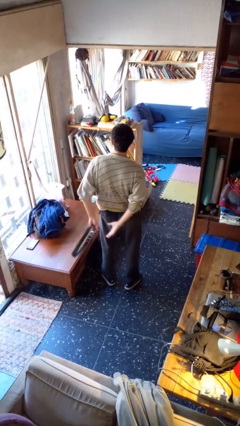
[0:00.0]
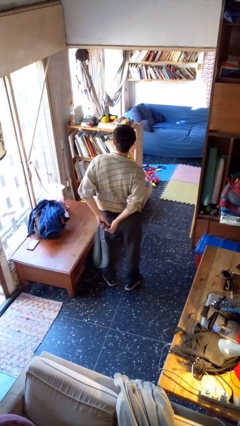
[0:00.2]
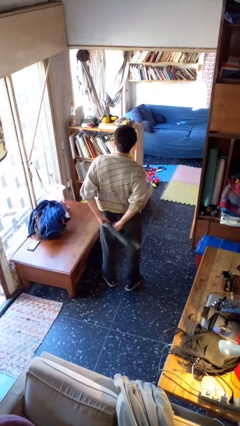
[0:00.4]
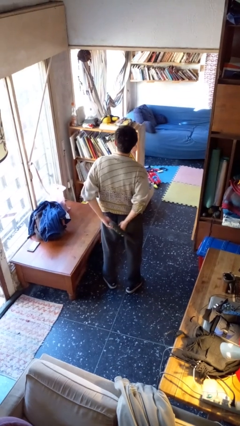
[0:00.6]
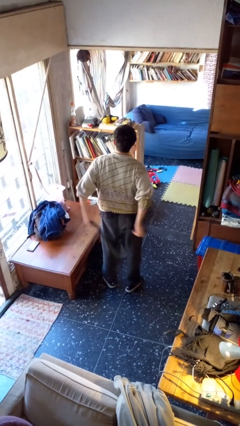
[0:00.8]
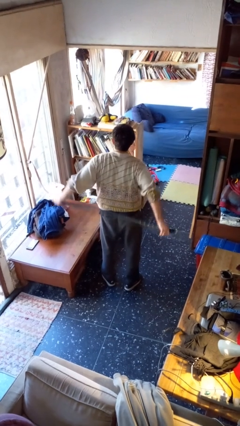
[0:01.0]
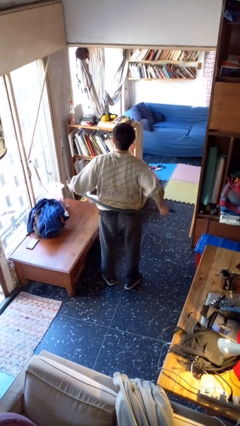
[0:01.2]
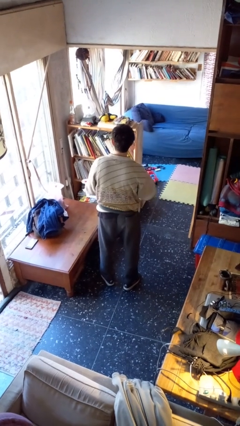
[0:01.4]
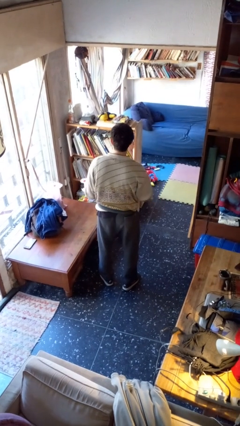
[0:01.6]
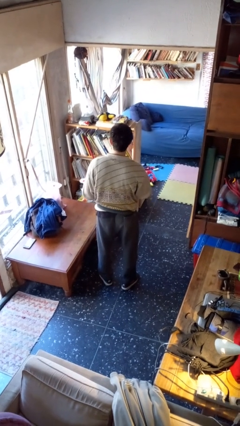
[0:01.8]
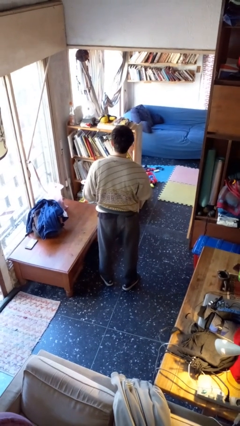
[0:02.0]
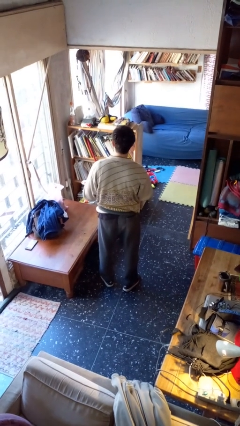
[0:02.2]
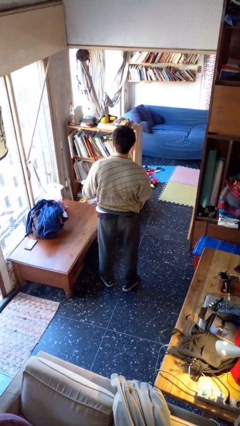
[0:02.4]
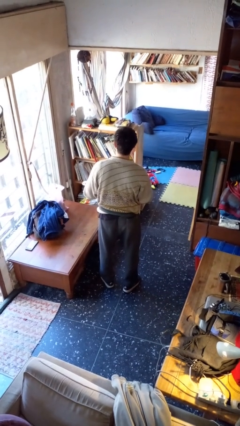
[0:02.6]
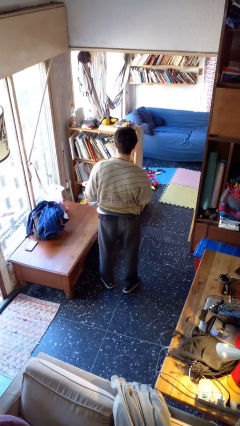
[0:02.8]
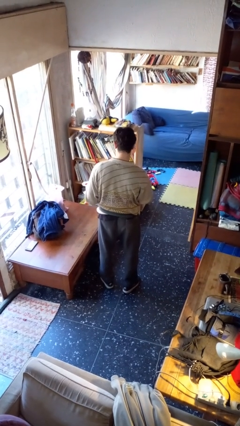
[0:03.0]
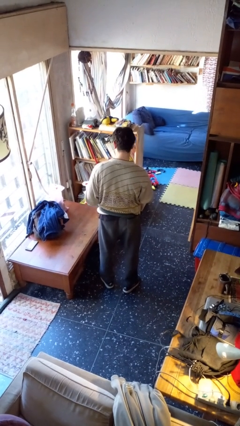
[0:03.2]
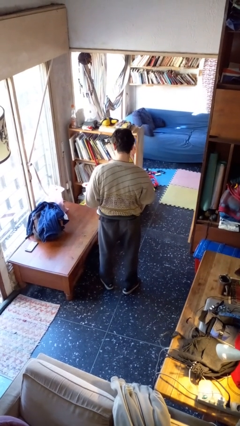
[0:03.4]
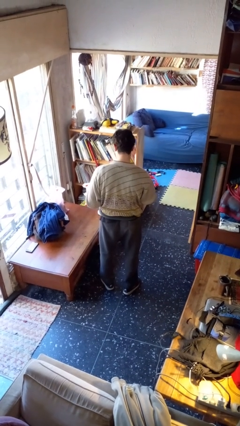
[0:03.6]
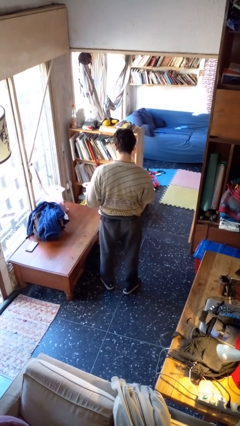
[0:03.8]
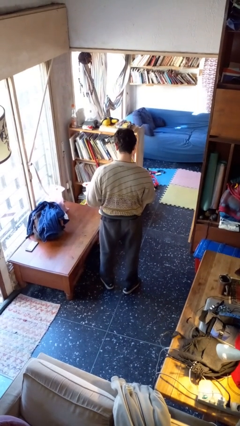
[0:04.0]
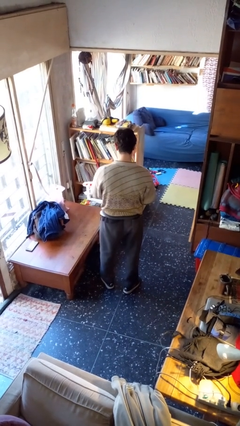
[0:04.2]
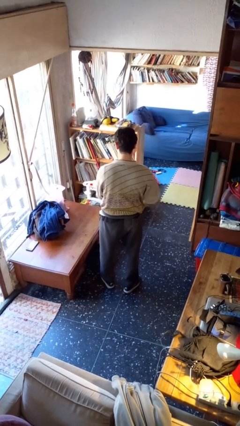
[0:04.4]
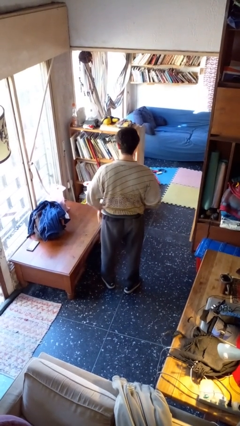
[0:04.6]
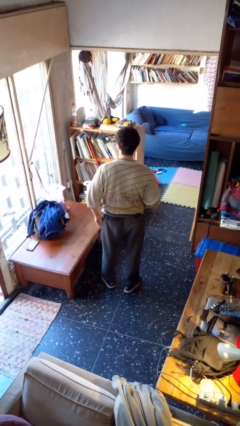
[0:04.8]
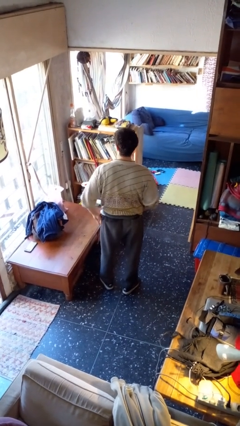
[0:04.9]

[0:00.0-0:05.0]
person puts on belt

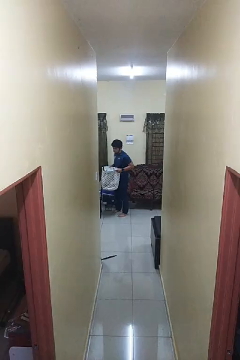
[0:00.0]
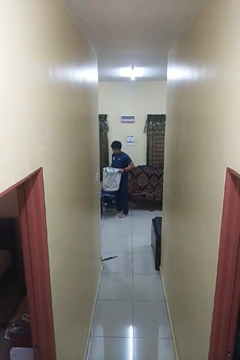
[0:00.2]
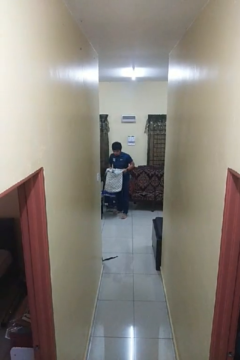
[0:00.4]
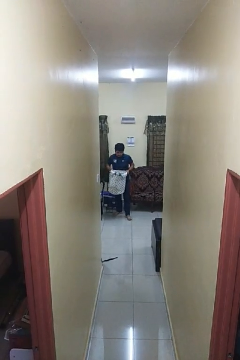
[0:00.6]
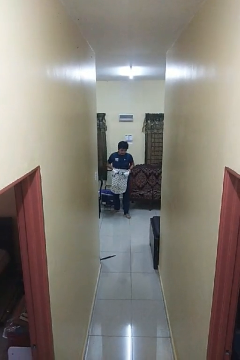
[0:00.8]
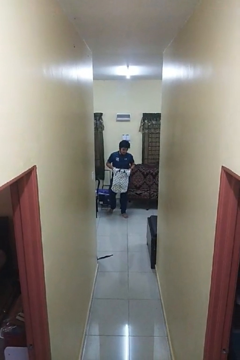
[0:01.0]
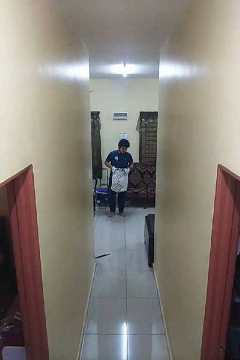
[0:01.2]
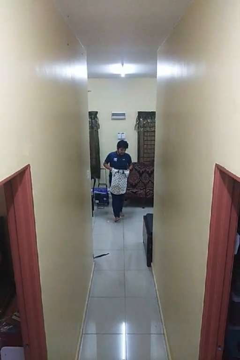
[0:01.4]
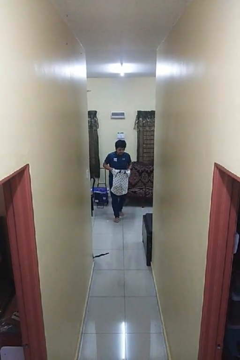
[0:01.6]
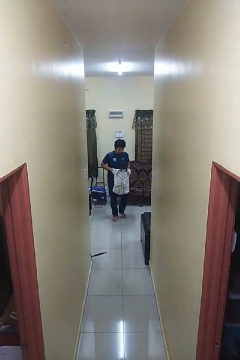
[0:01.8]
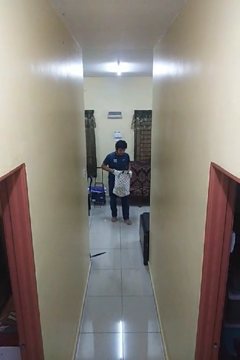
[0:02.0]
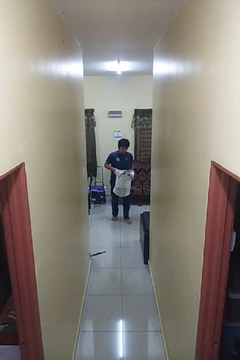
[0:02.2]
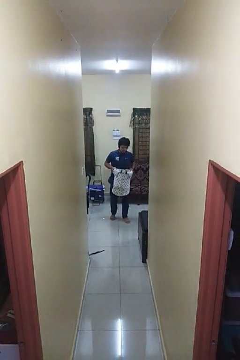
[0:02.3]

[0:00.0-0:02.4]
person carries laundry basket

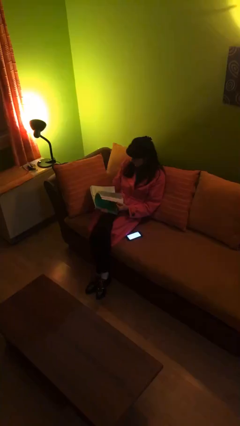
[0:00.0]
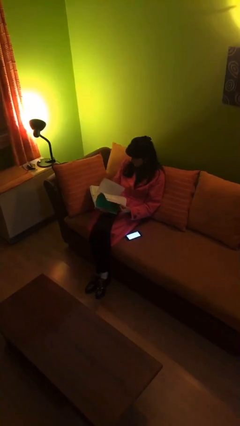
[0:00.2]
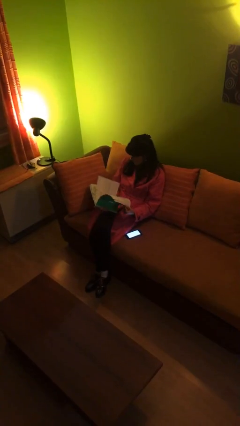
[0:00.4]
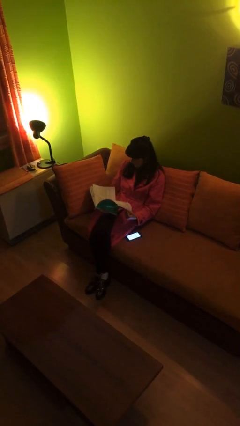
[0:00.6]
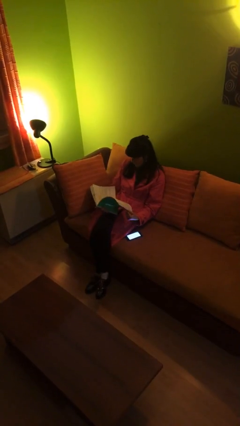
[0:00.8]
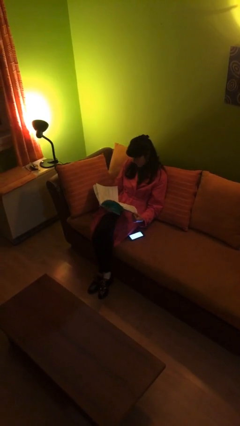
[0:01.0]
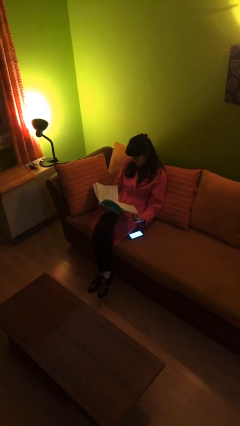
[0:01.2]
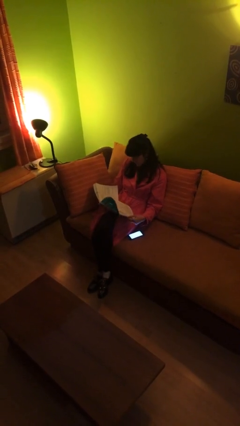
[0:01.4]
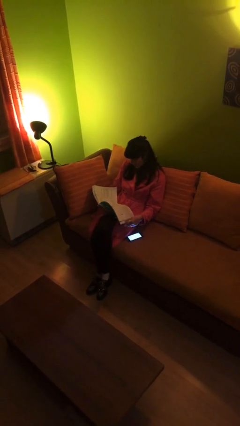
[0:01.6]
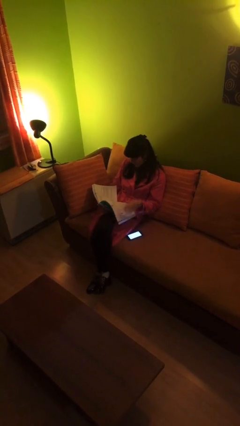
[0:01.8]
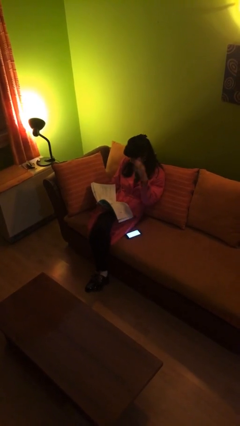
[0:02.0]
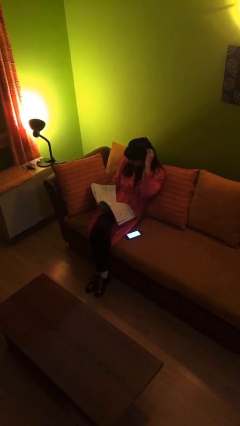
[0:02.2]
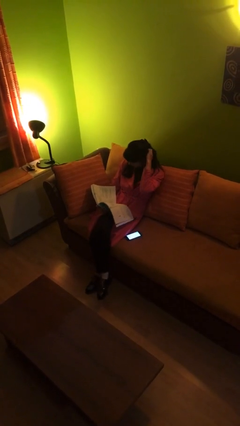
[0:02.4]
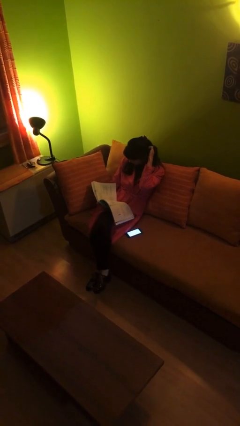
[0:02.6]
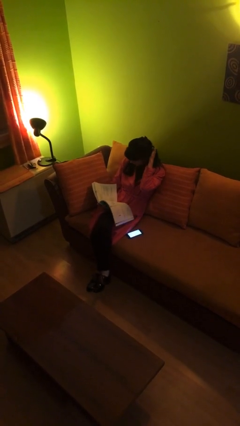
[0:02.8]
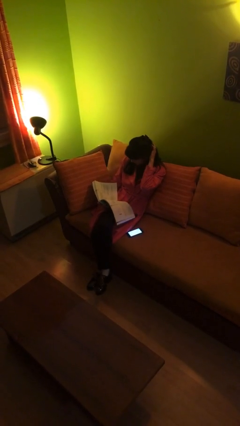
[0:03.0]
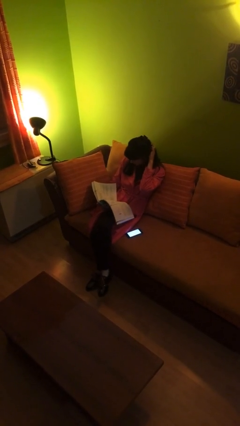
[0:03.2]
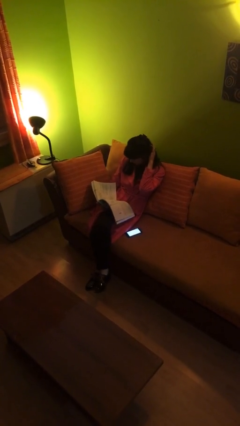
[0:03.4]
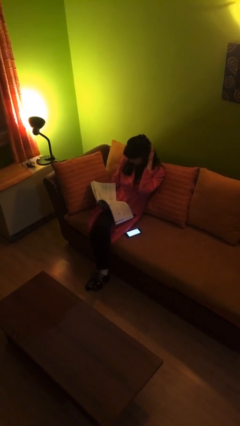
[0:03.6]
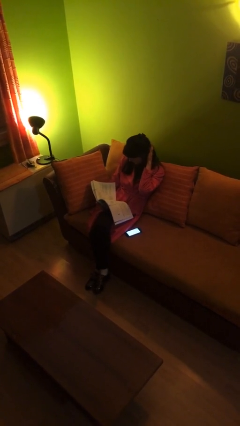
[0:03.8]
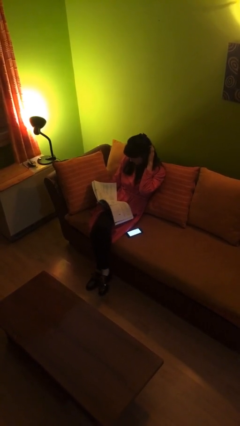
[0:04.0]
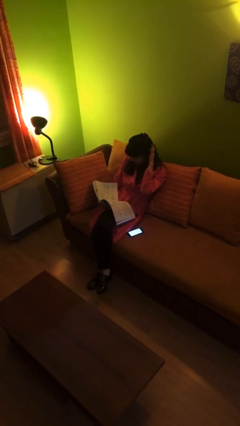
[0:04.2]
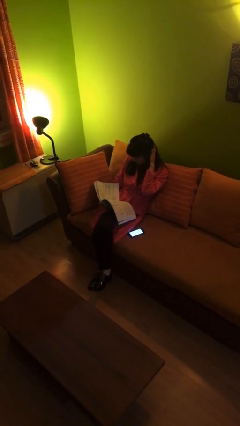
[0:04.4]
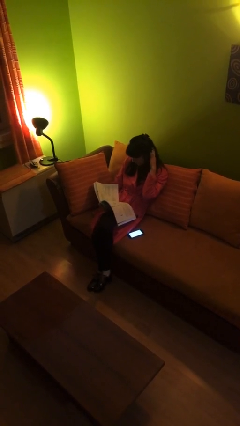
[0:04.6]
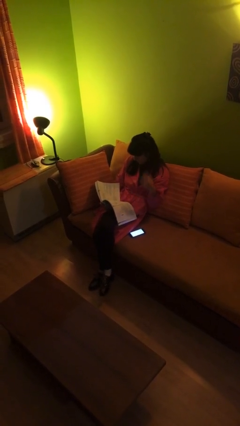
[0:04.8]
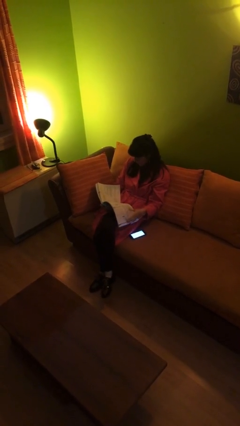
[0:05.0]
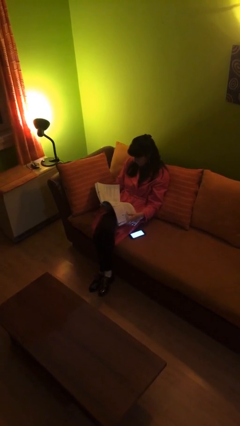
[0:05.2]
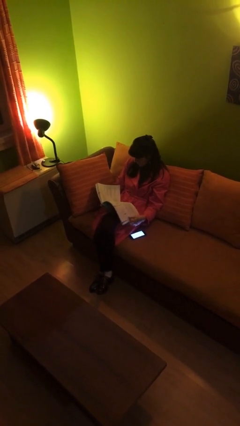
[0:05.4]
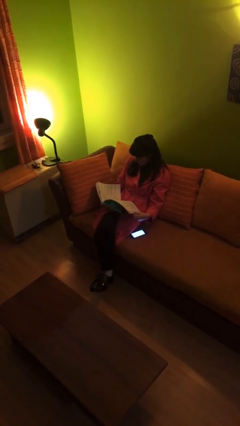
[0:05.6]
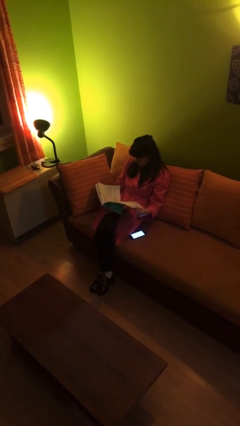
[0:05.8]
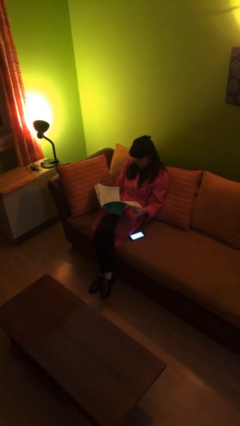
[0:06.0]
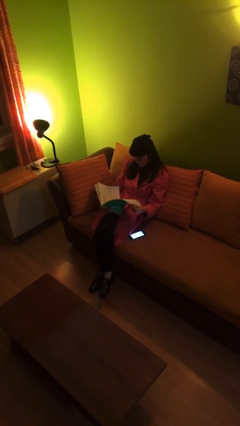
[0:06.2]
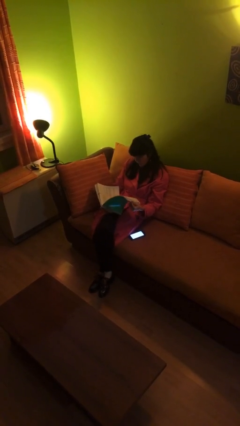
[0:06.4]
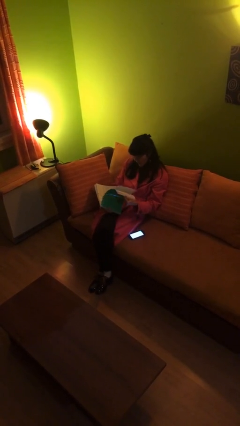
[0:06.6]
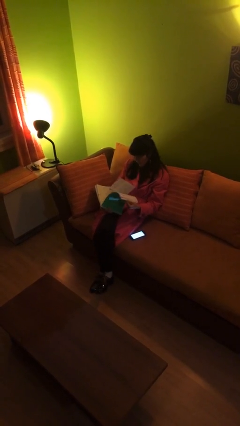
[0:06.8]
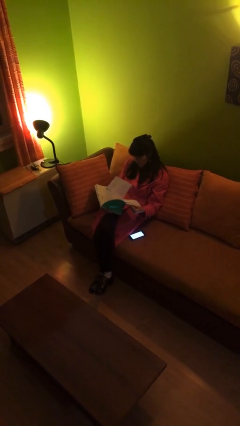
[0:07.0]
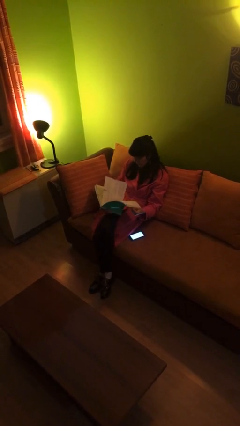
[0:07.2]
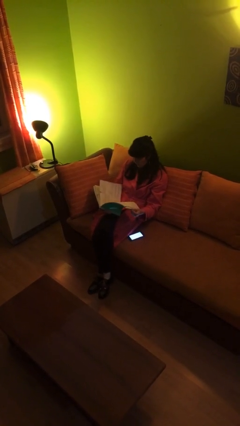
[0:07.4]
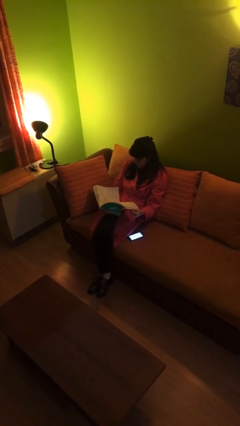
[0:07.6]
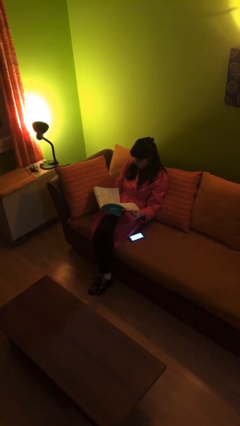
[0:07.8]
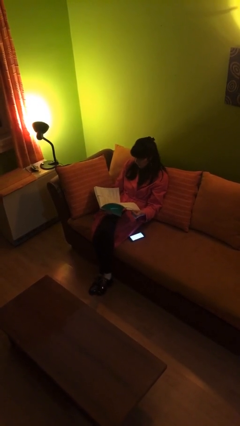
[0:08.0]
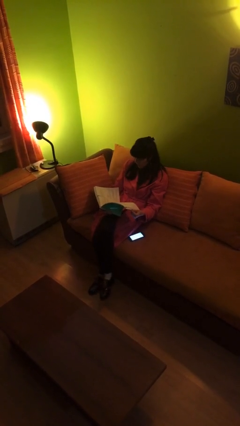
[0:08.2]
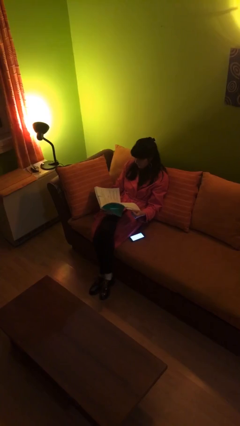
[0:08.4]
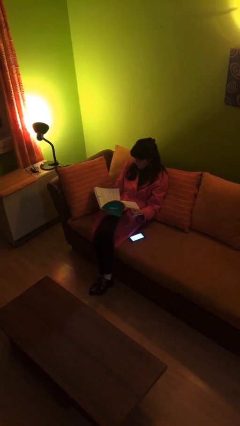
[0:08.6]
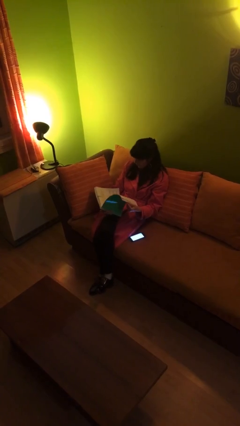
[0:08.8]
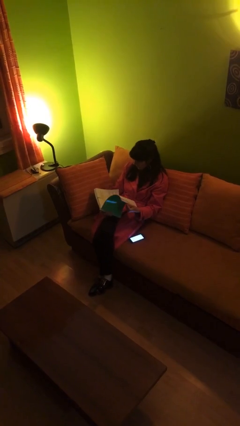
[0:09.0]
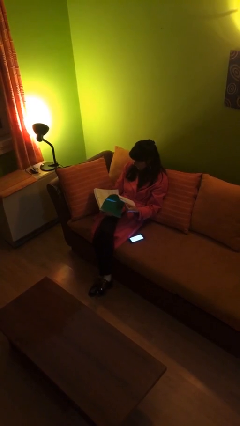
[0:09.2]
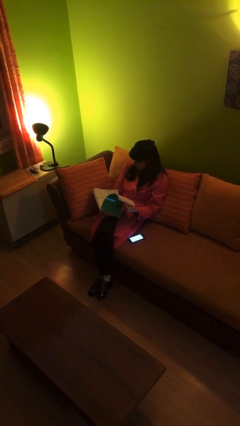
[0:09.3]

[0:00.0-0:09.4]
person reads document

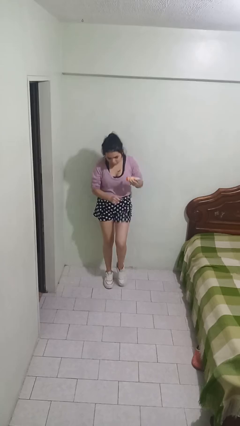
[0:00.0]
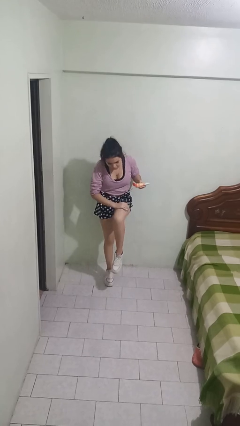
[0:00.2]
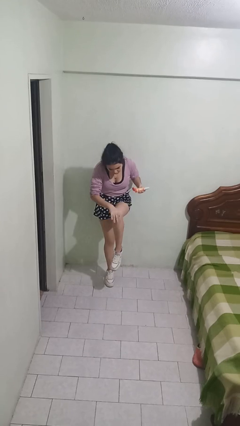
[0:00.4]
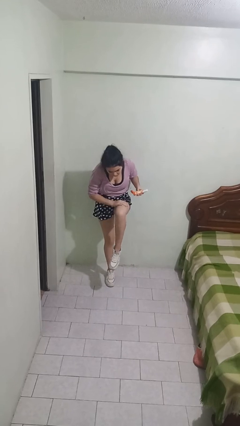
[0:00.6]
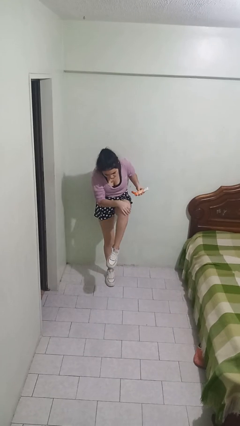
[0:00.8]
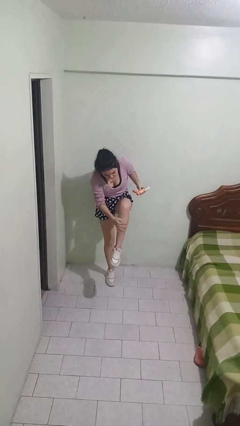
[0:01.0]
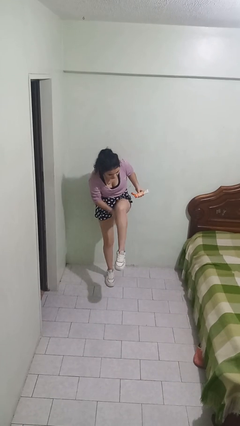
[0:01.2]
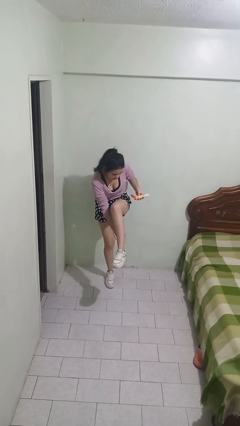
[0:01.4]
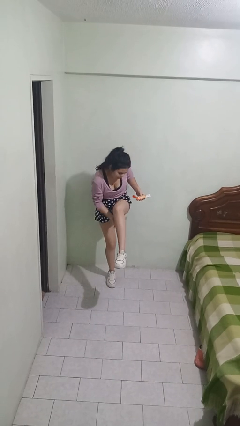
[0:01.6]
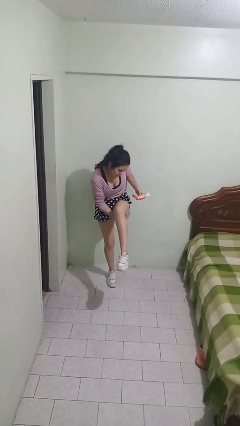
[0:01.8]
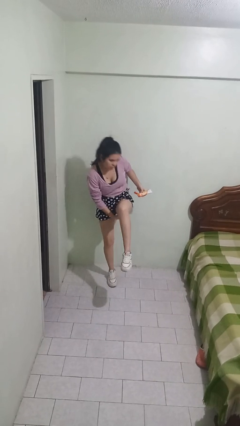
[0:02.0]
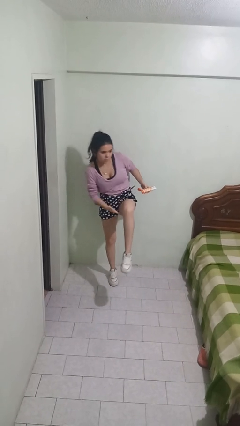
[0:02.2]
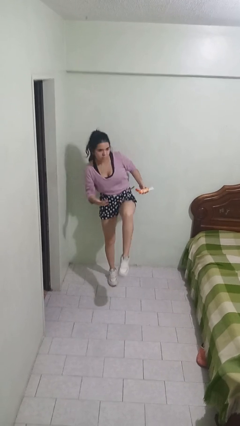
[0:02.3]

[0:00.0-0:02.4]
person applies sunscreen
